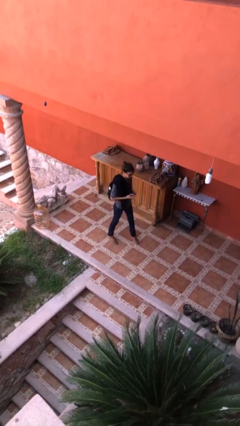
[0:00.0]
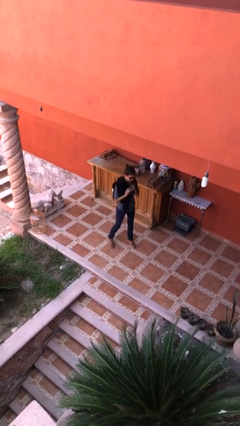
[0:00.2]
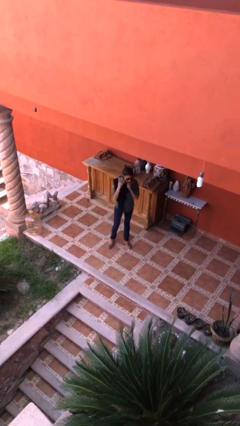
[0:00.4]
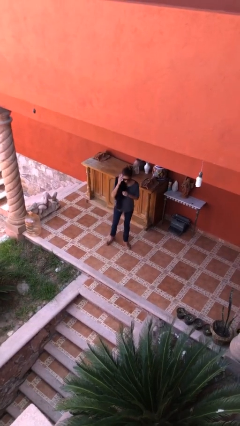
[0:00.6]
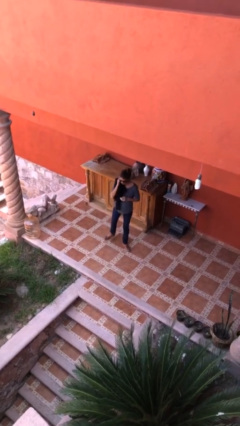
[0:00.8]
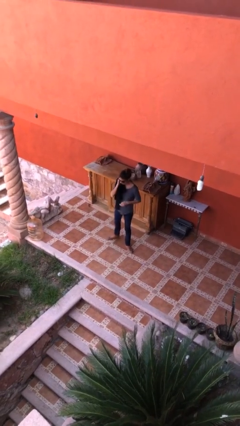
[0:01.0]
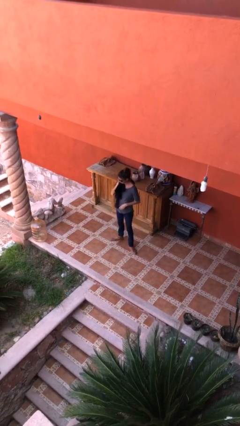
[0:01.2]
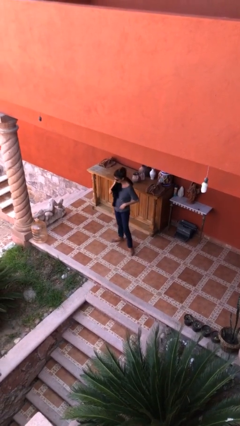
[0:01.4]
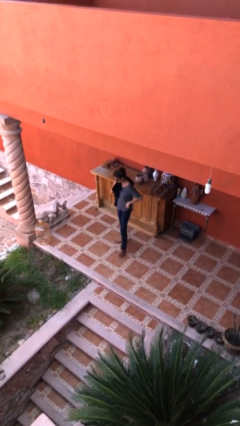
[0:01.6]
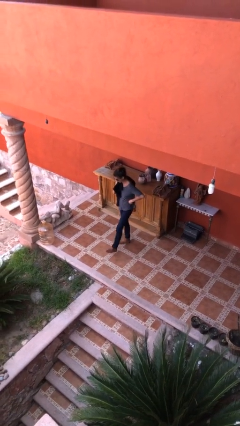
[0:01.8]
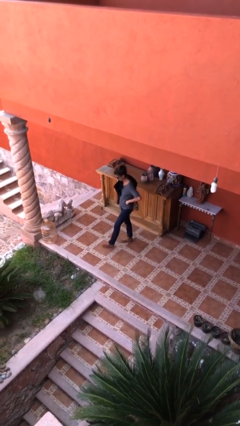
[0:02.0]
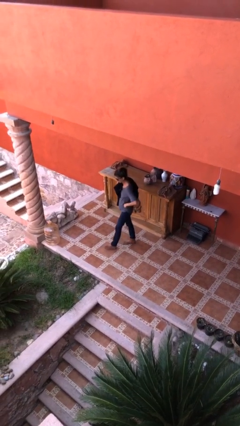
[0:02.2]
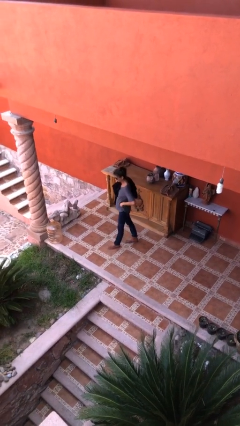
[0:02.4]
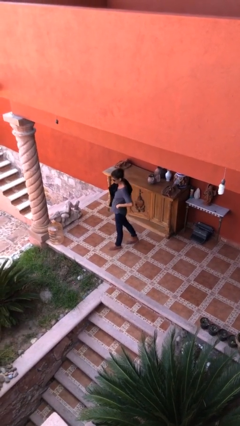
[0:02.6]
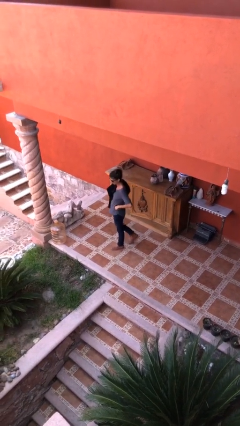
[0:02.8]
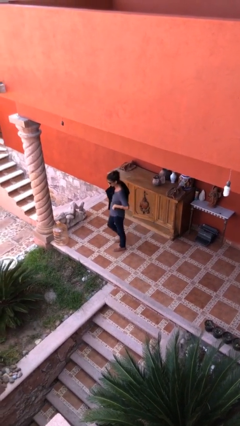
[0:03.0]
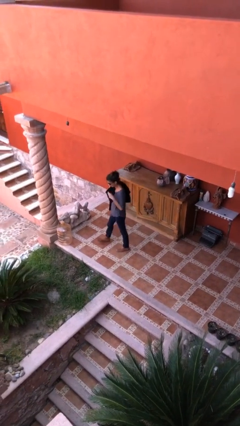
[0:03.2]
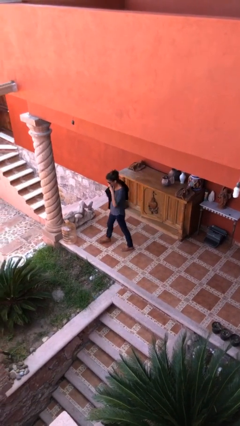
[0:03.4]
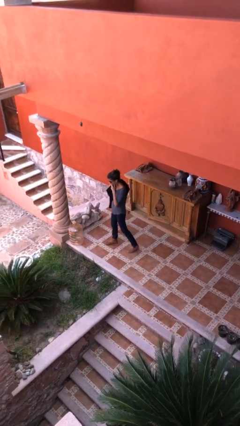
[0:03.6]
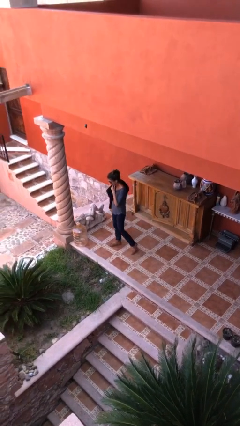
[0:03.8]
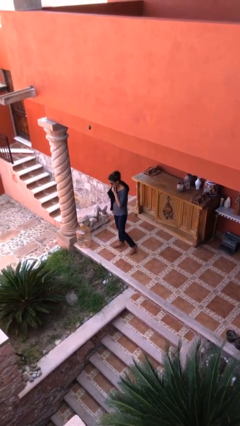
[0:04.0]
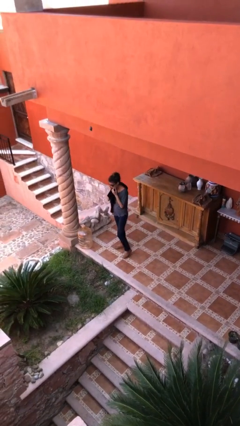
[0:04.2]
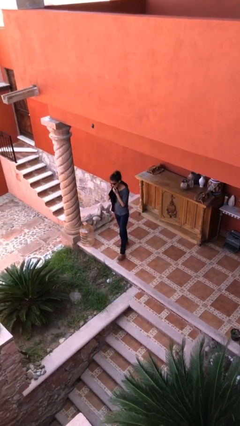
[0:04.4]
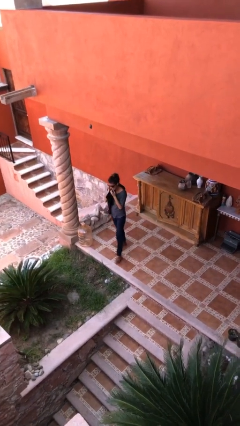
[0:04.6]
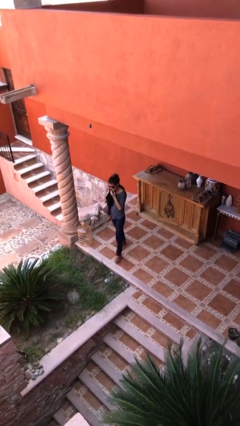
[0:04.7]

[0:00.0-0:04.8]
person talks on phone

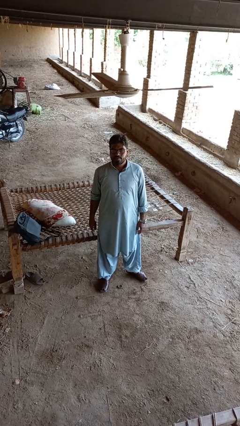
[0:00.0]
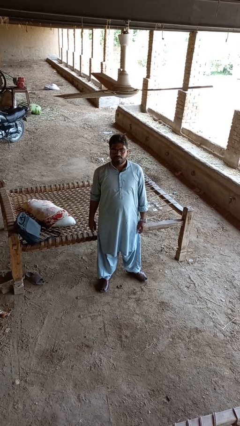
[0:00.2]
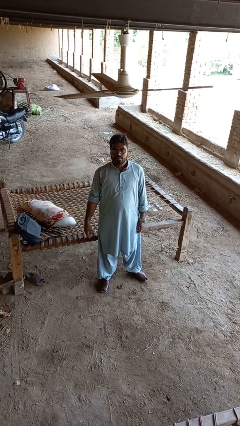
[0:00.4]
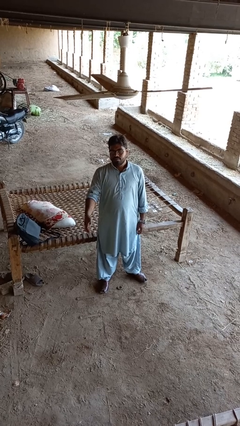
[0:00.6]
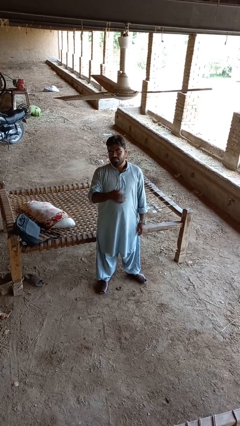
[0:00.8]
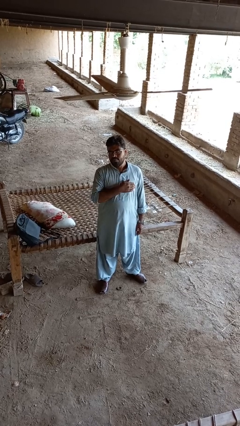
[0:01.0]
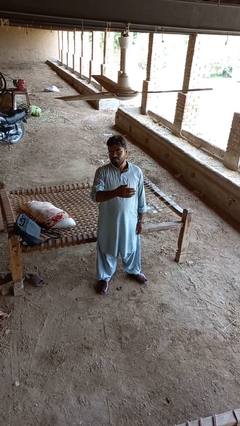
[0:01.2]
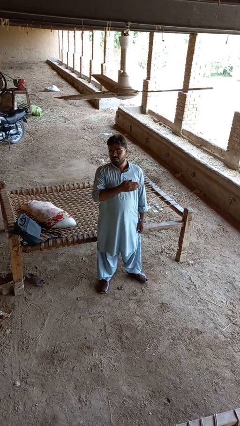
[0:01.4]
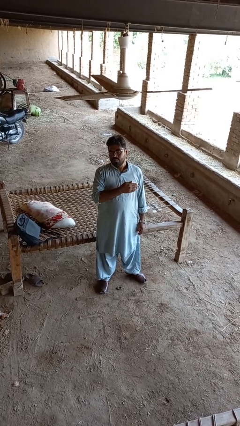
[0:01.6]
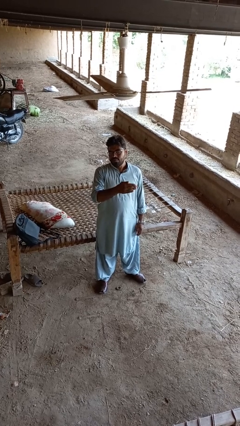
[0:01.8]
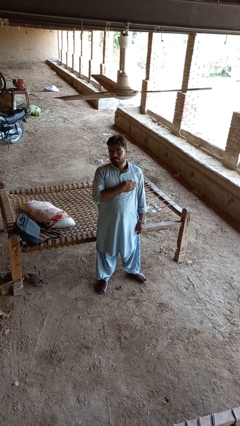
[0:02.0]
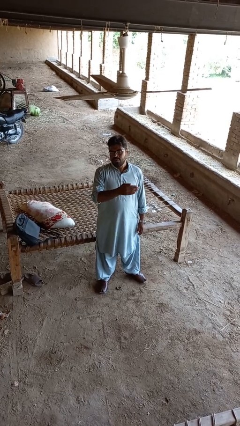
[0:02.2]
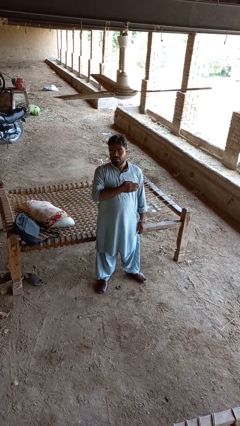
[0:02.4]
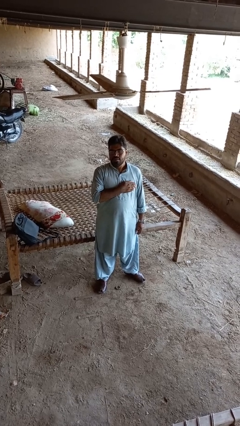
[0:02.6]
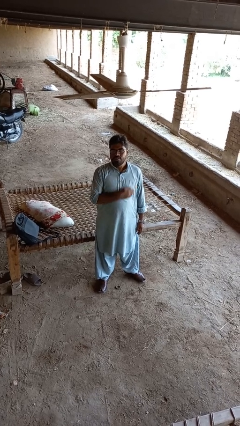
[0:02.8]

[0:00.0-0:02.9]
person drums on chest

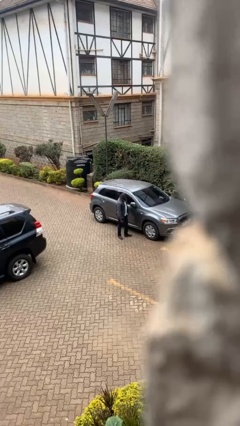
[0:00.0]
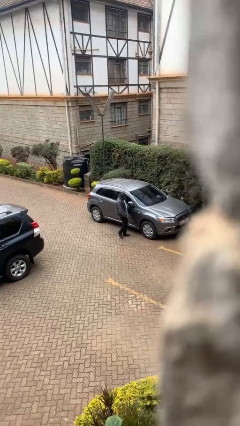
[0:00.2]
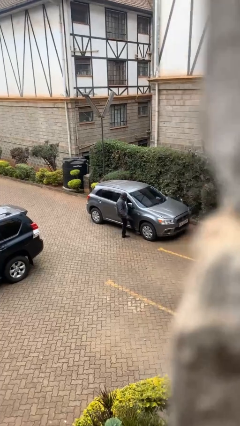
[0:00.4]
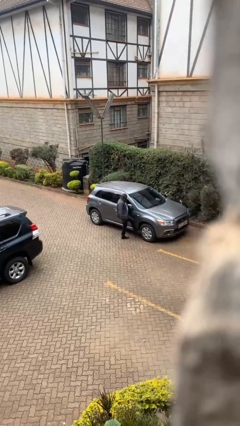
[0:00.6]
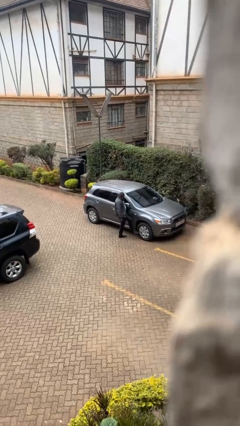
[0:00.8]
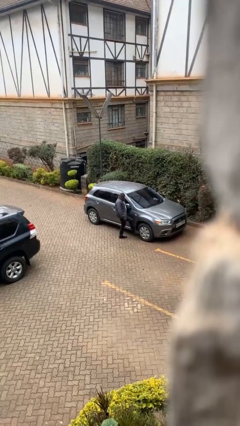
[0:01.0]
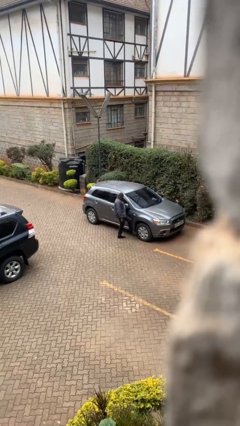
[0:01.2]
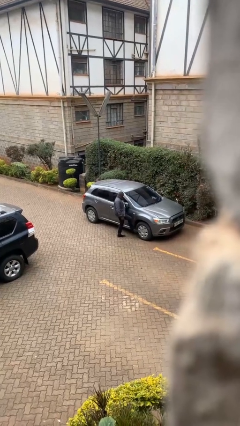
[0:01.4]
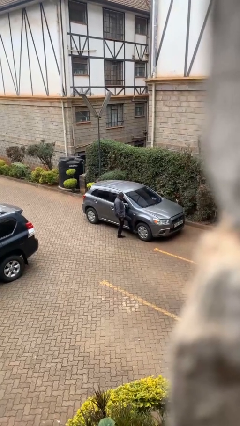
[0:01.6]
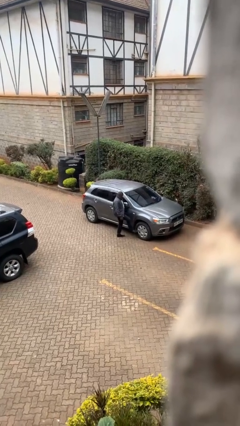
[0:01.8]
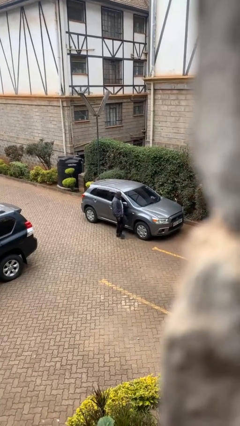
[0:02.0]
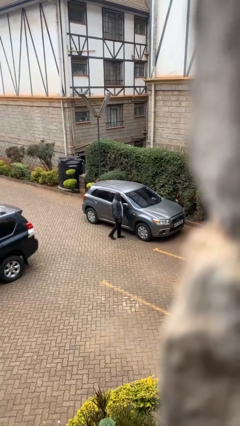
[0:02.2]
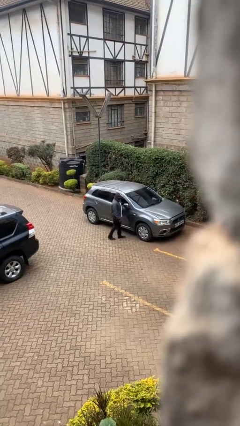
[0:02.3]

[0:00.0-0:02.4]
person kicks car tires

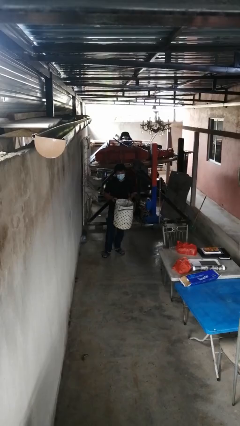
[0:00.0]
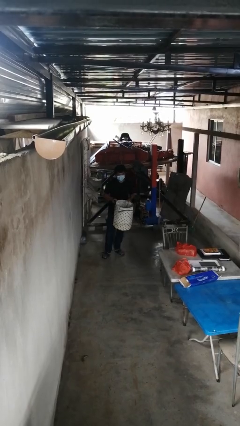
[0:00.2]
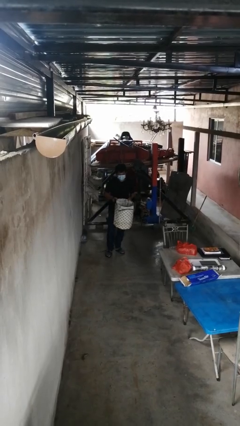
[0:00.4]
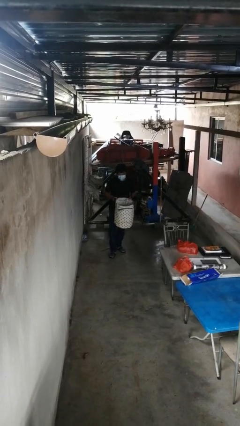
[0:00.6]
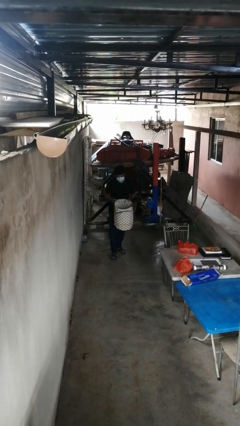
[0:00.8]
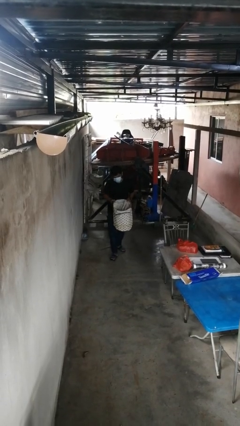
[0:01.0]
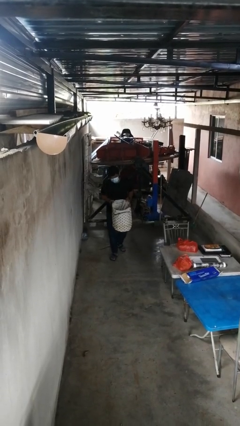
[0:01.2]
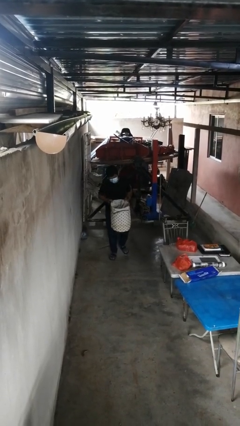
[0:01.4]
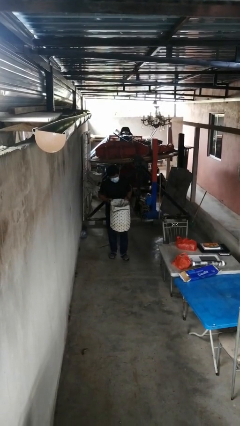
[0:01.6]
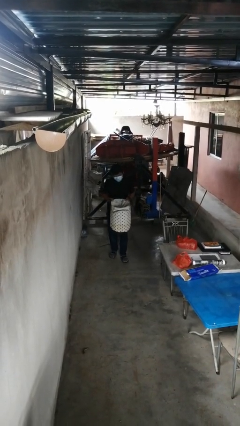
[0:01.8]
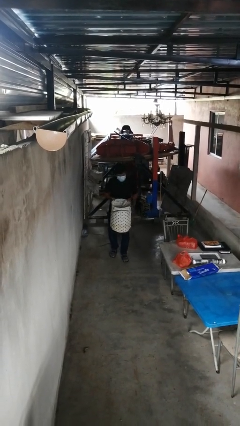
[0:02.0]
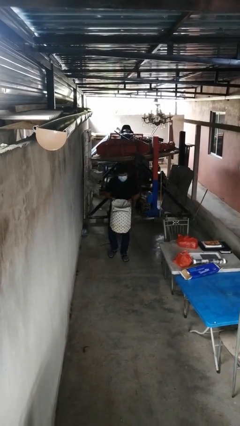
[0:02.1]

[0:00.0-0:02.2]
person carries laundry basket

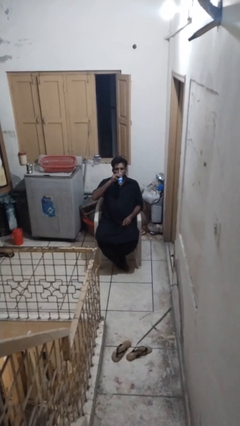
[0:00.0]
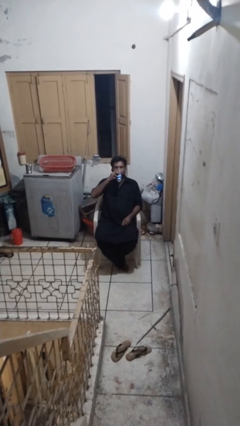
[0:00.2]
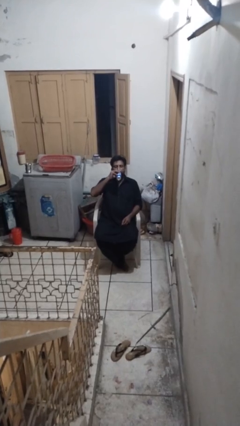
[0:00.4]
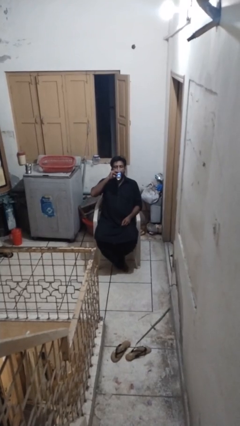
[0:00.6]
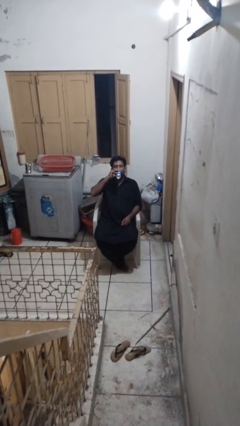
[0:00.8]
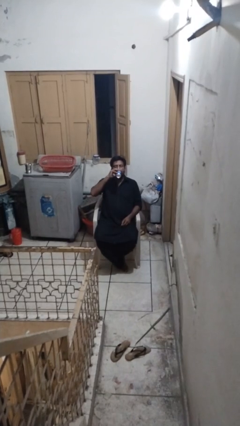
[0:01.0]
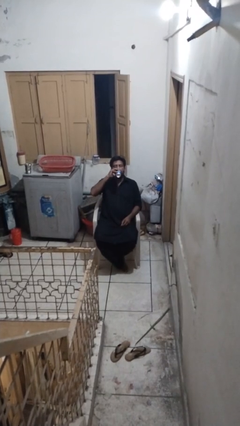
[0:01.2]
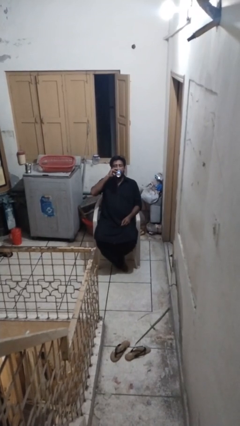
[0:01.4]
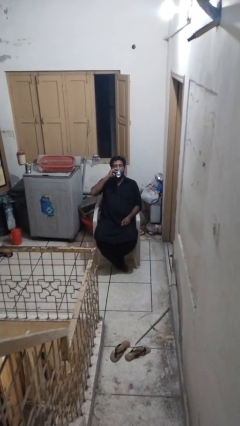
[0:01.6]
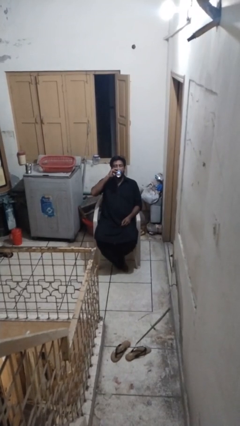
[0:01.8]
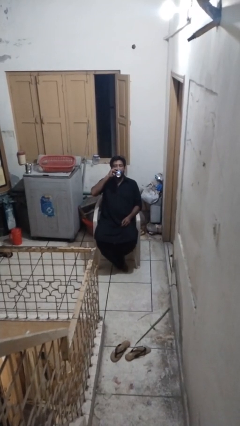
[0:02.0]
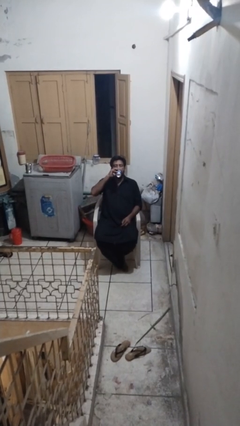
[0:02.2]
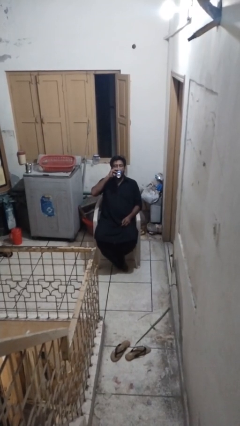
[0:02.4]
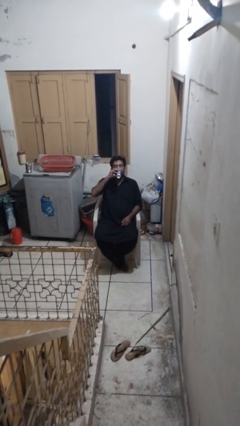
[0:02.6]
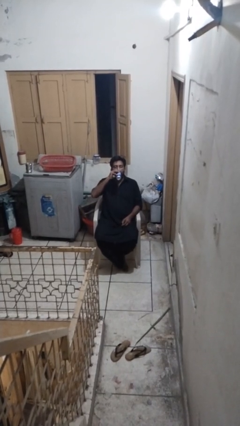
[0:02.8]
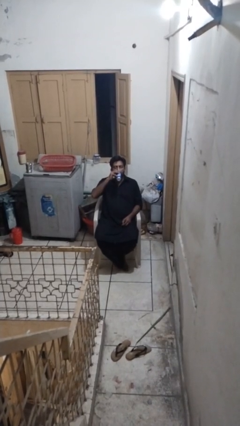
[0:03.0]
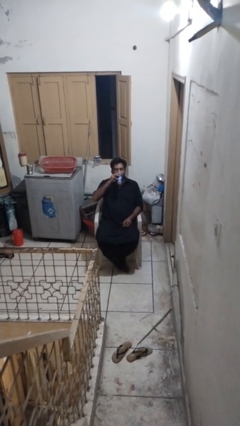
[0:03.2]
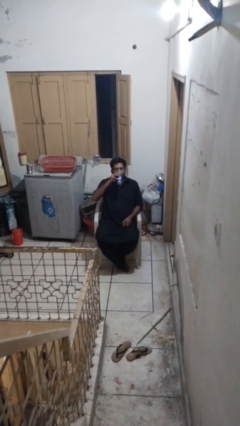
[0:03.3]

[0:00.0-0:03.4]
person drinks from beverage can

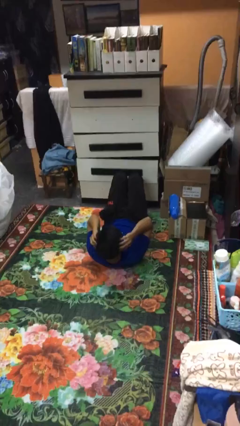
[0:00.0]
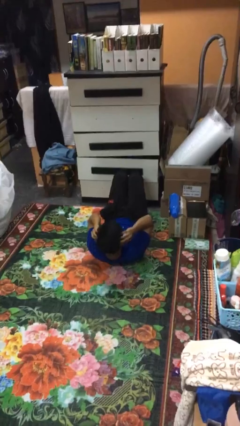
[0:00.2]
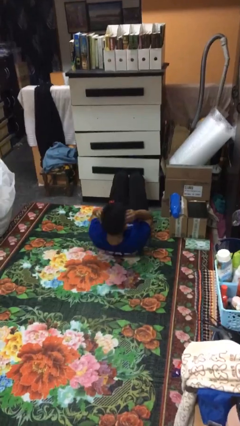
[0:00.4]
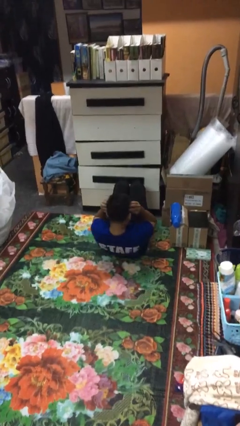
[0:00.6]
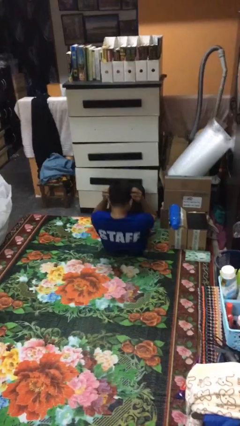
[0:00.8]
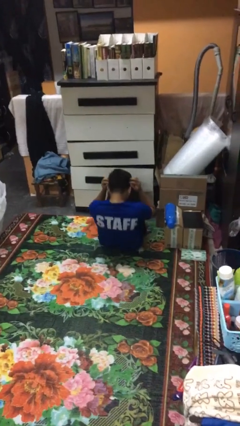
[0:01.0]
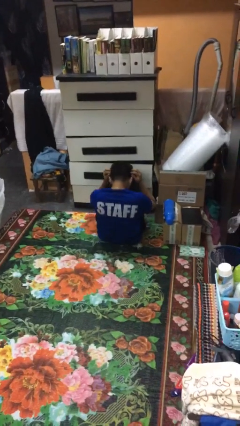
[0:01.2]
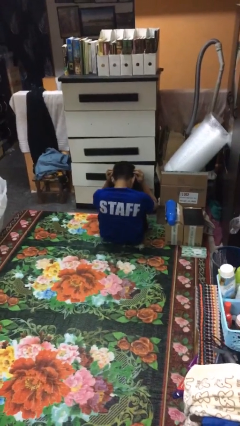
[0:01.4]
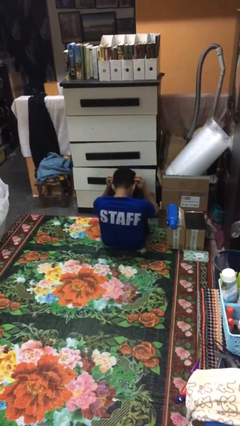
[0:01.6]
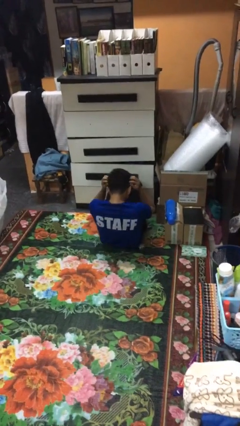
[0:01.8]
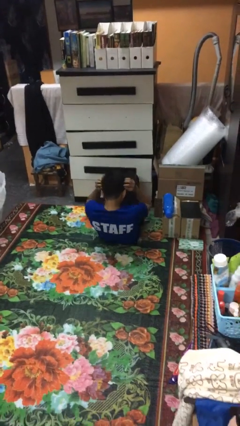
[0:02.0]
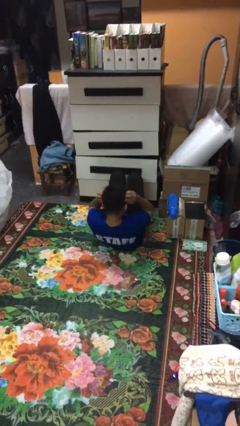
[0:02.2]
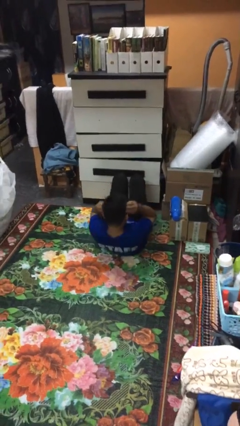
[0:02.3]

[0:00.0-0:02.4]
person exercises with situp
